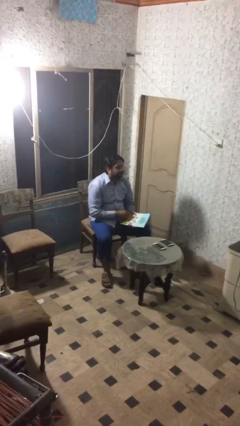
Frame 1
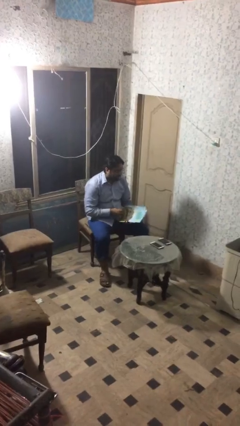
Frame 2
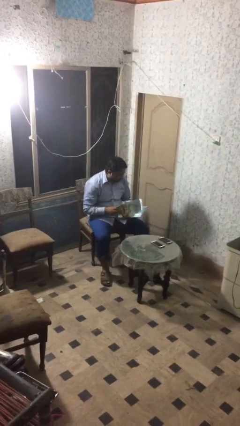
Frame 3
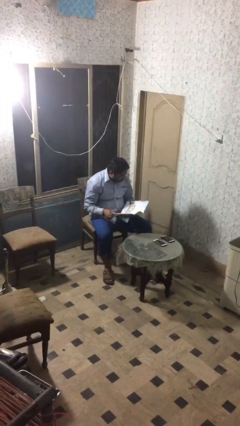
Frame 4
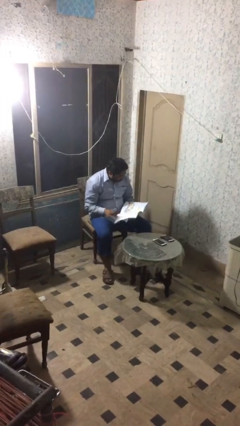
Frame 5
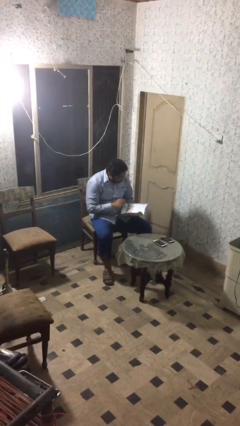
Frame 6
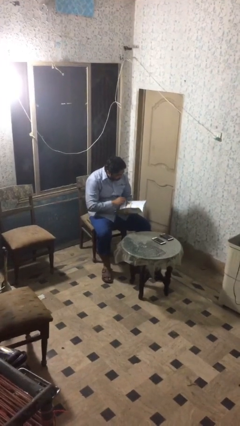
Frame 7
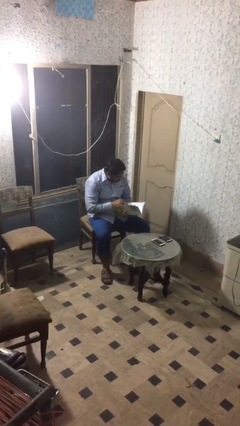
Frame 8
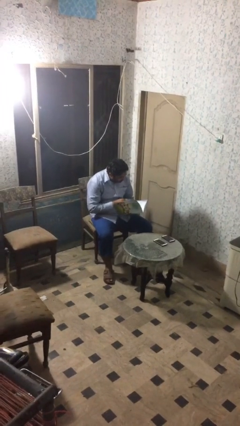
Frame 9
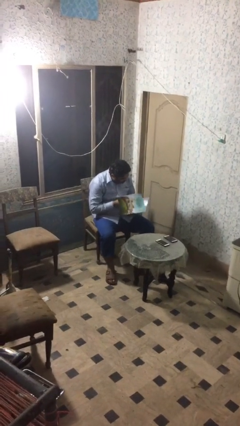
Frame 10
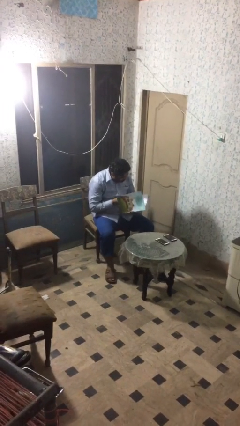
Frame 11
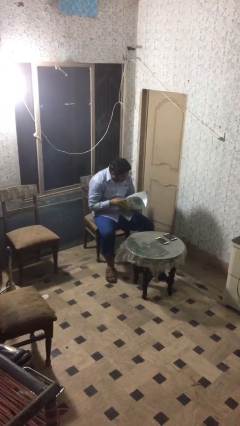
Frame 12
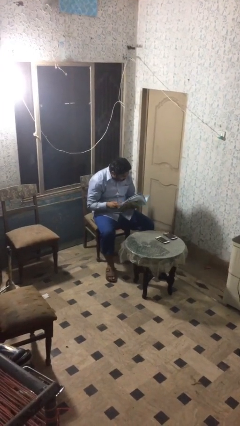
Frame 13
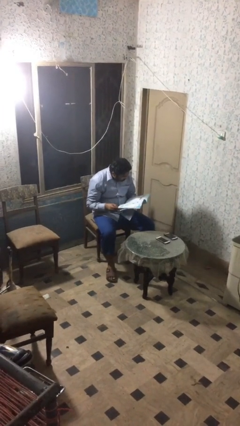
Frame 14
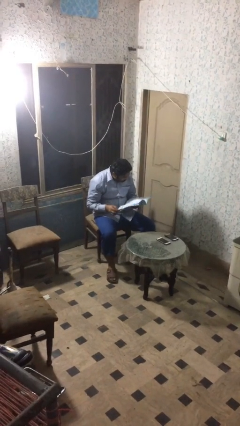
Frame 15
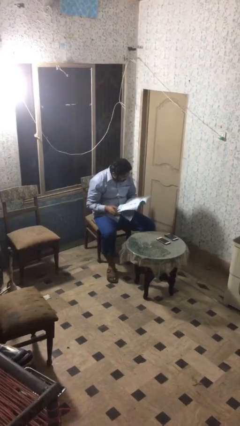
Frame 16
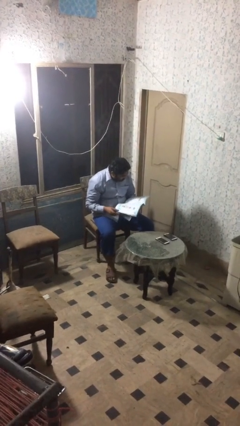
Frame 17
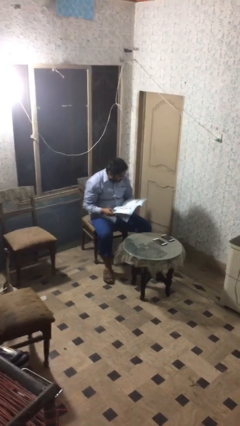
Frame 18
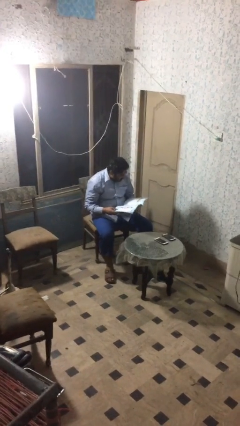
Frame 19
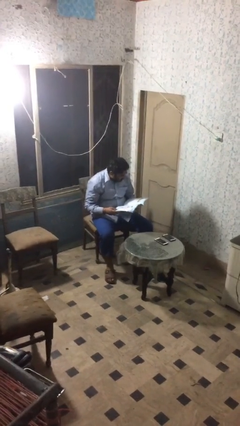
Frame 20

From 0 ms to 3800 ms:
person reads document

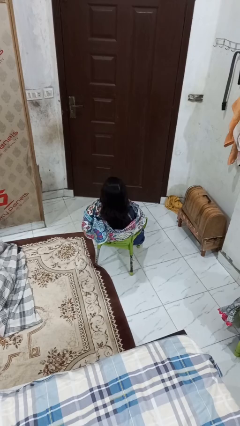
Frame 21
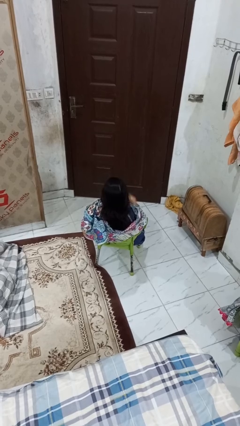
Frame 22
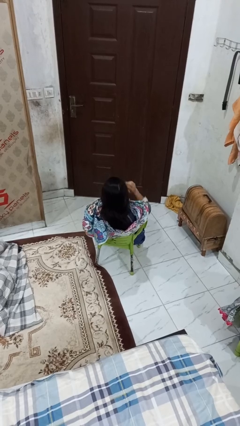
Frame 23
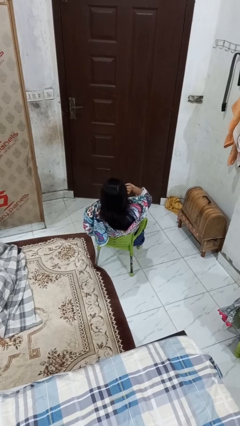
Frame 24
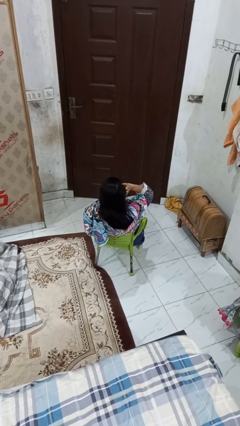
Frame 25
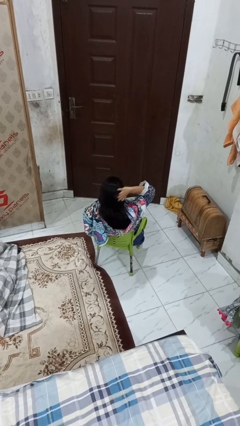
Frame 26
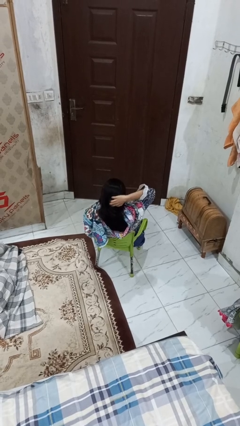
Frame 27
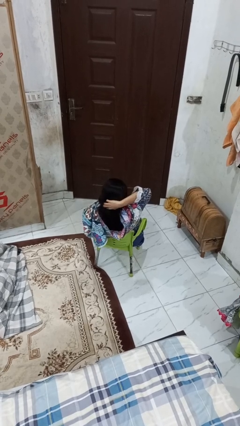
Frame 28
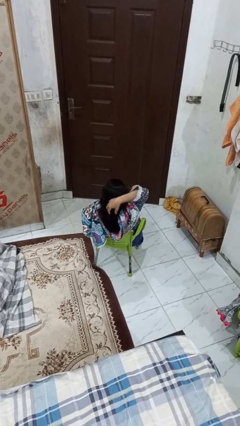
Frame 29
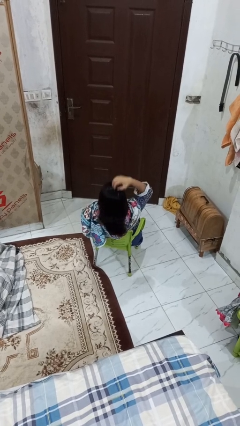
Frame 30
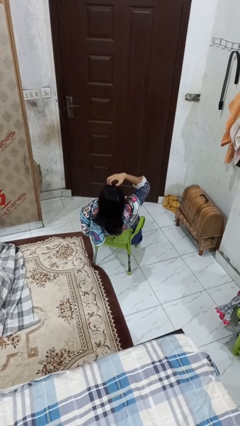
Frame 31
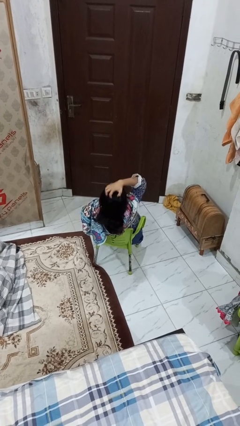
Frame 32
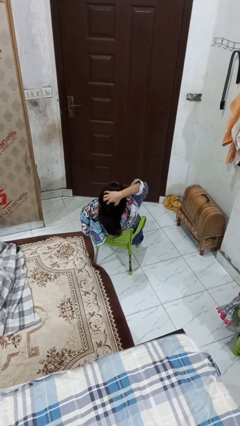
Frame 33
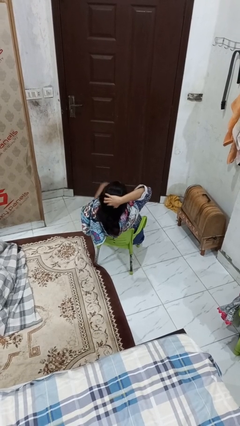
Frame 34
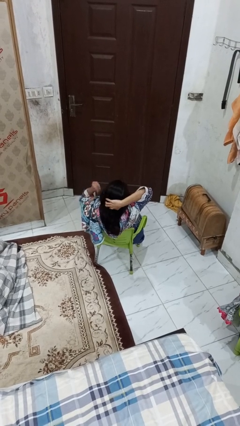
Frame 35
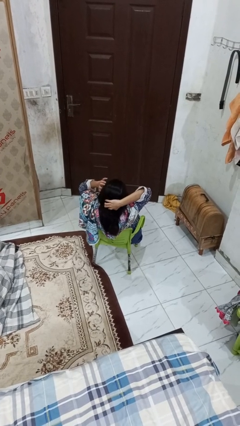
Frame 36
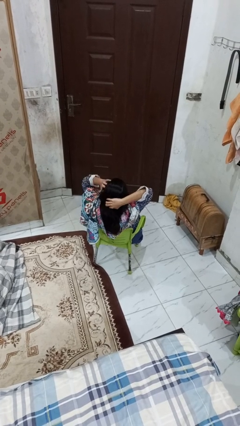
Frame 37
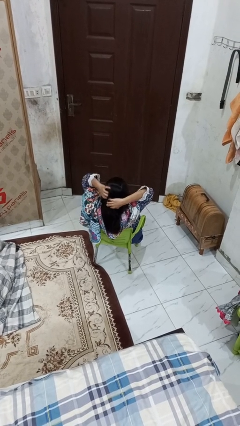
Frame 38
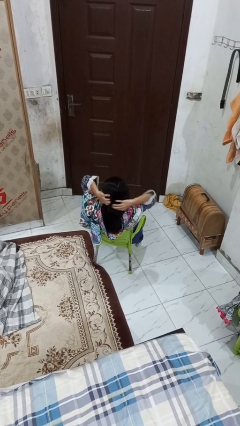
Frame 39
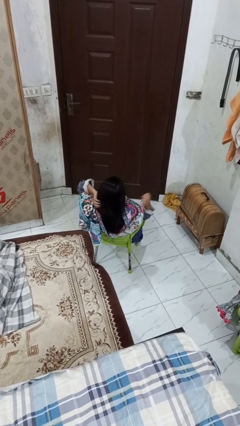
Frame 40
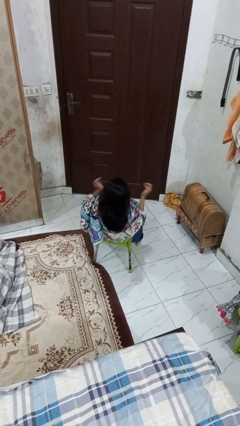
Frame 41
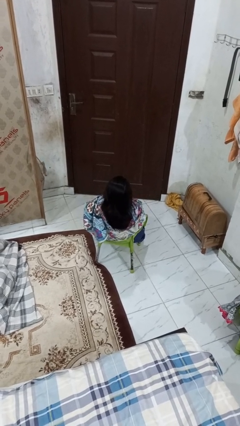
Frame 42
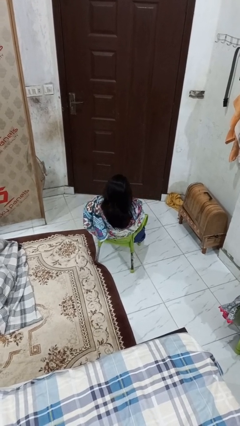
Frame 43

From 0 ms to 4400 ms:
person strokes hair

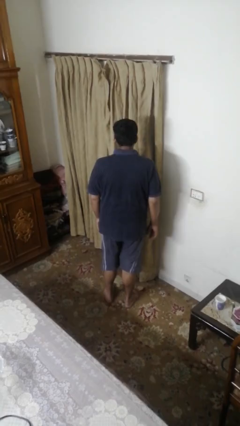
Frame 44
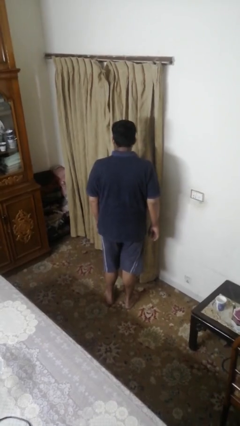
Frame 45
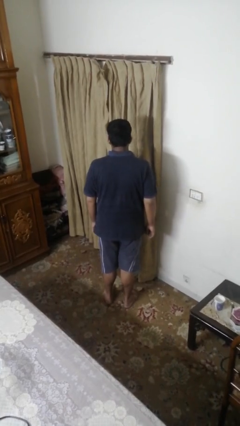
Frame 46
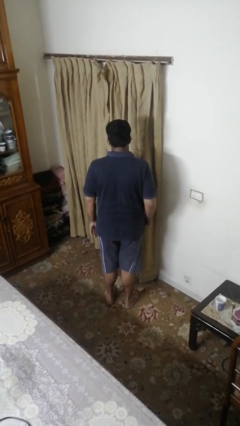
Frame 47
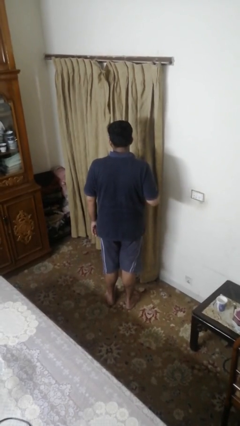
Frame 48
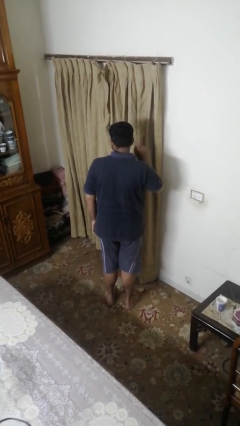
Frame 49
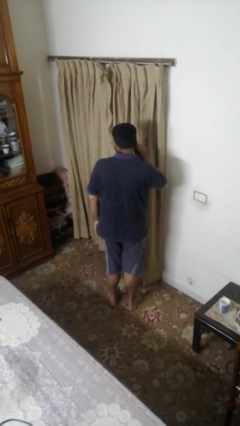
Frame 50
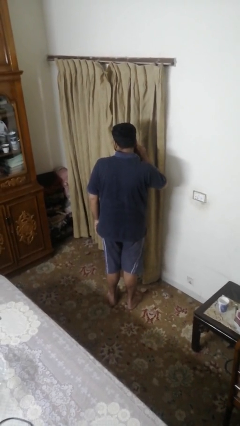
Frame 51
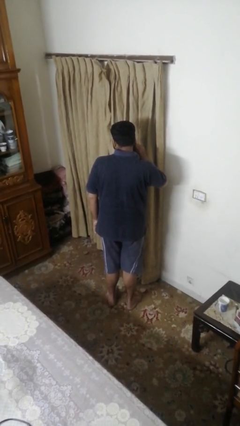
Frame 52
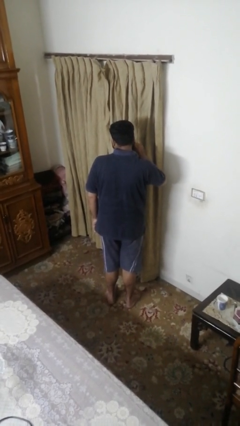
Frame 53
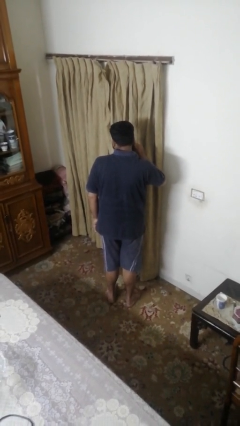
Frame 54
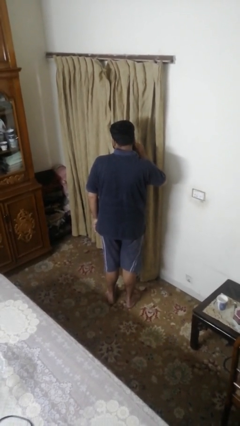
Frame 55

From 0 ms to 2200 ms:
person gestures listen closely

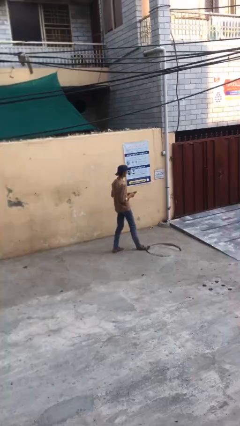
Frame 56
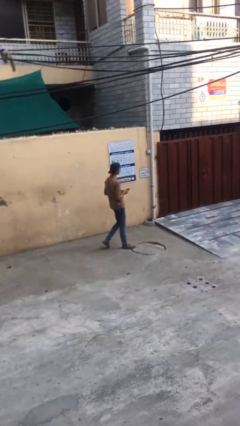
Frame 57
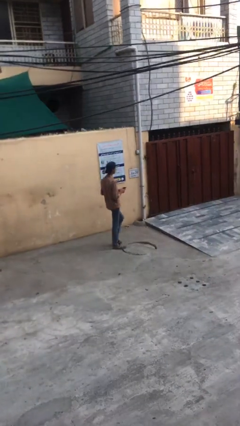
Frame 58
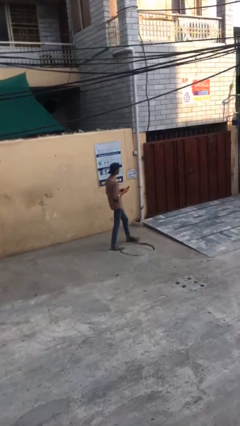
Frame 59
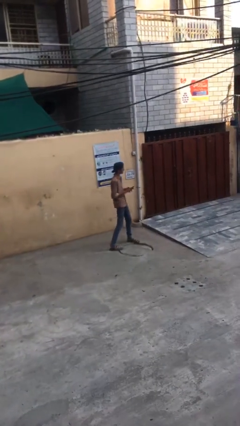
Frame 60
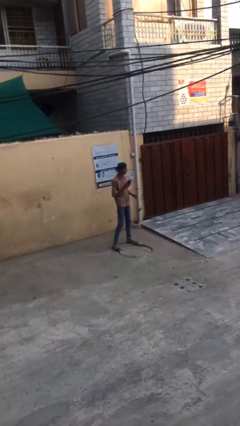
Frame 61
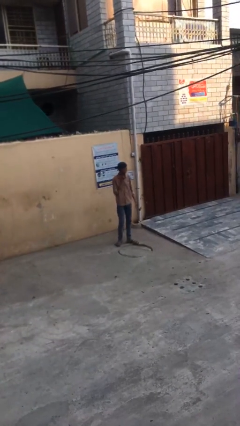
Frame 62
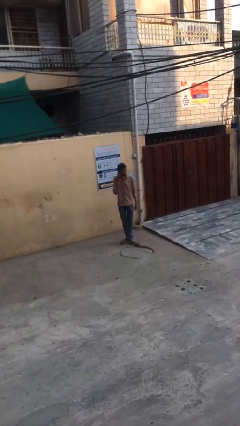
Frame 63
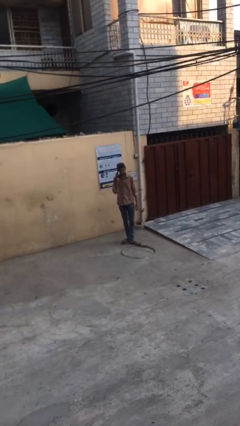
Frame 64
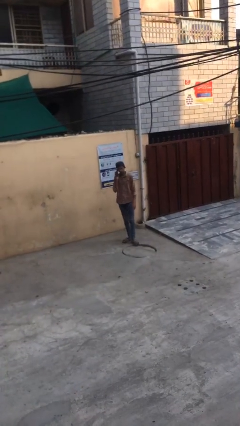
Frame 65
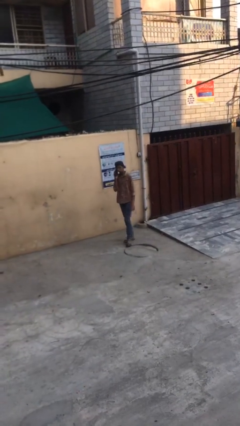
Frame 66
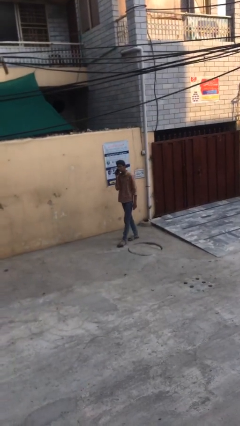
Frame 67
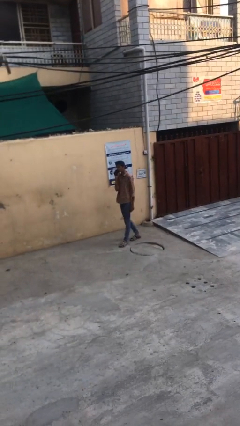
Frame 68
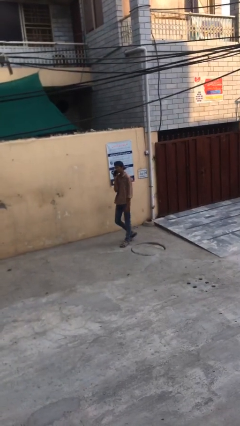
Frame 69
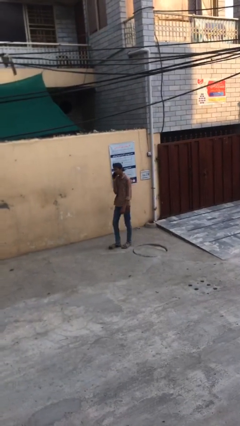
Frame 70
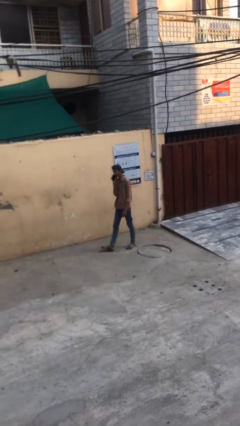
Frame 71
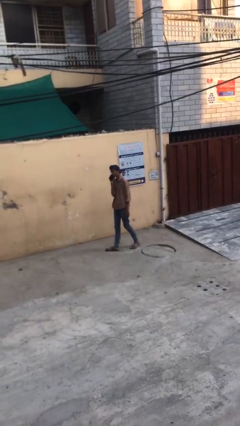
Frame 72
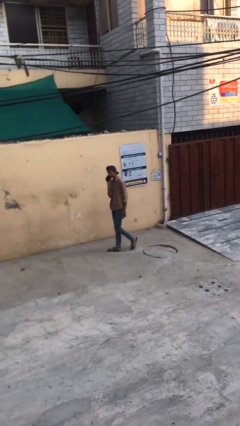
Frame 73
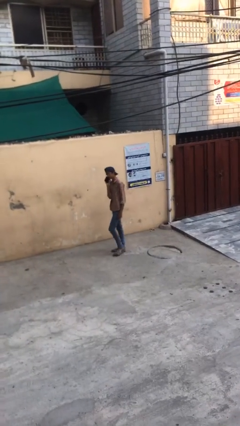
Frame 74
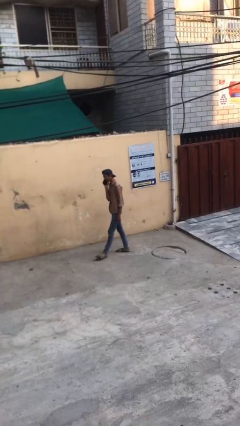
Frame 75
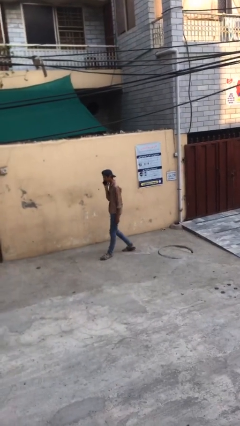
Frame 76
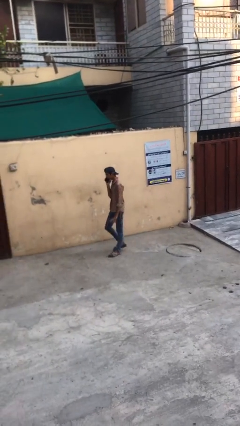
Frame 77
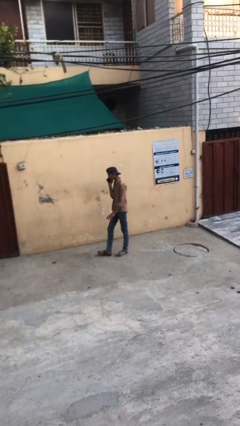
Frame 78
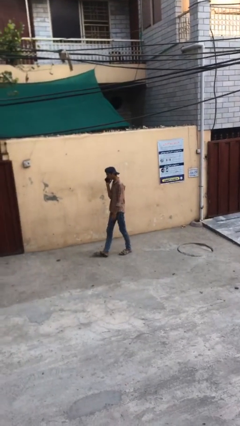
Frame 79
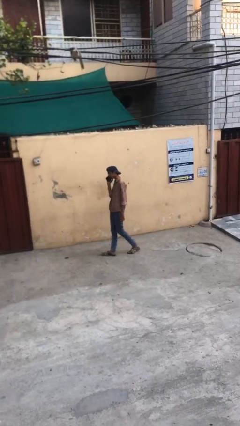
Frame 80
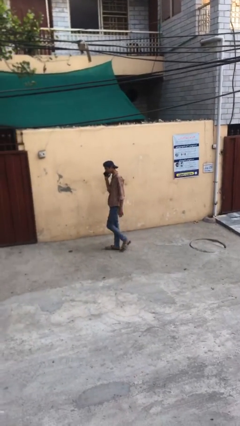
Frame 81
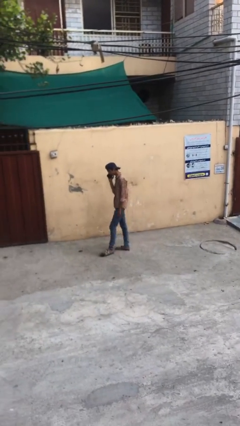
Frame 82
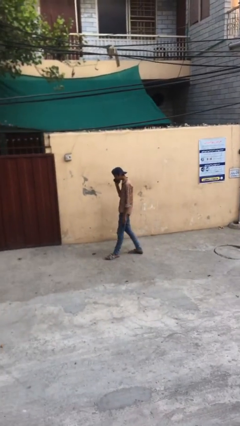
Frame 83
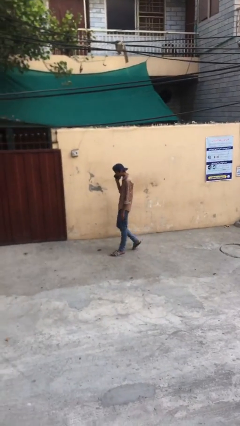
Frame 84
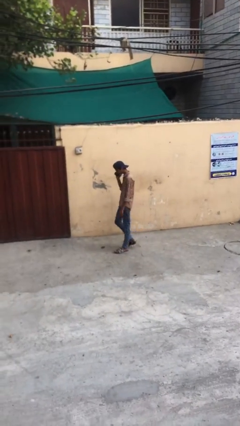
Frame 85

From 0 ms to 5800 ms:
person talks on phone

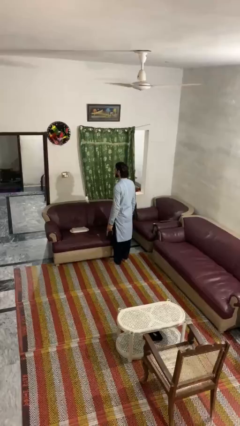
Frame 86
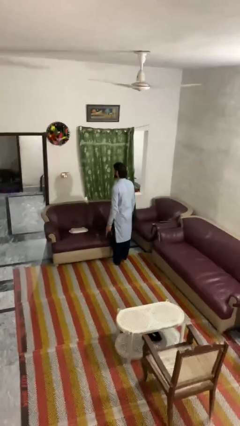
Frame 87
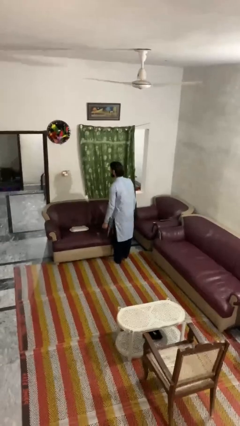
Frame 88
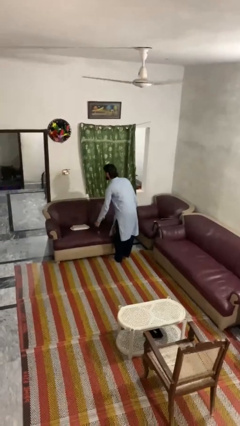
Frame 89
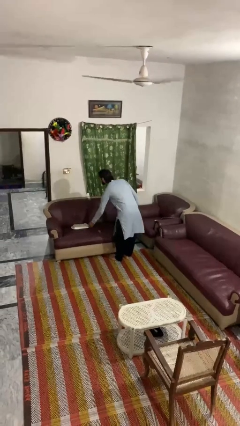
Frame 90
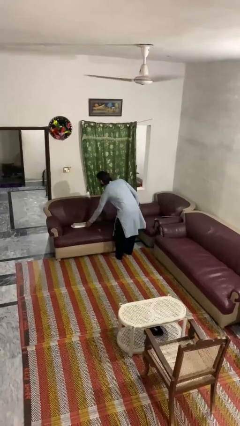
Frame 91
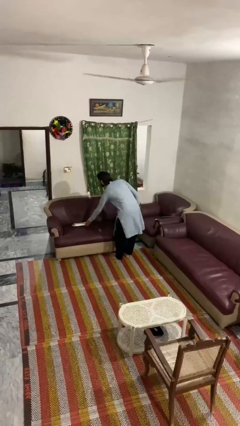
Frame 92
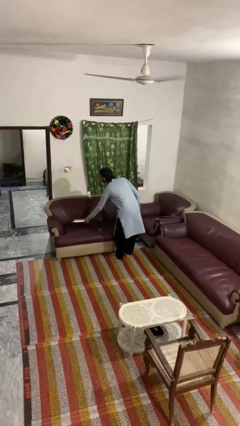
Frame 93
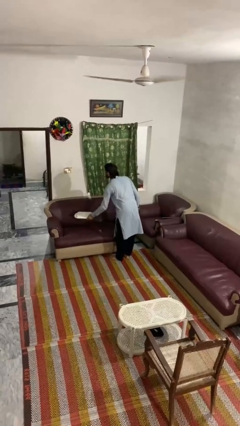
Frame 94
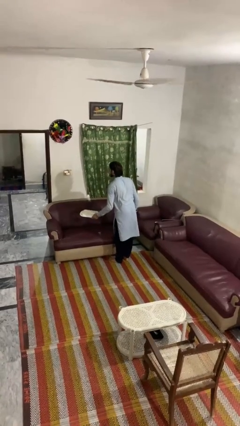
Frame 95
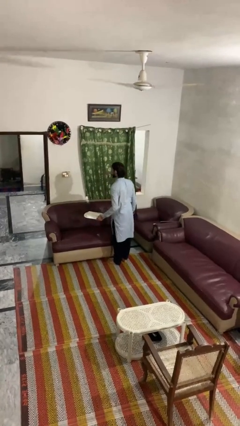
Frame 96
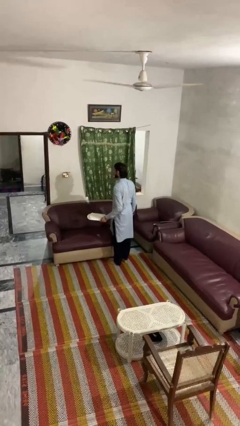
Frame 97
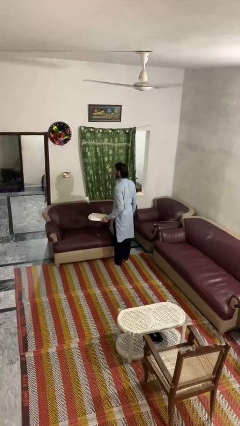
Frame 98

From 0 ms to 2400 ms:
person picks up object from couch
